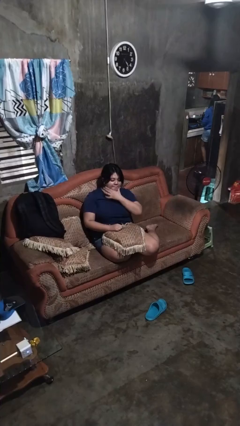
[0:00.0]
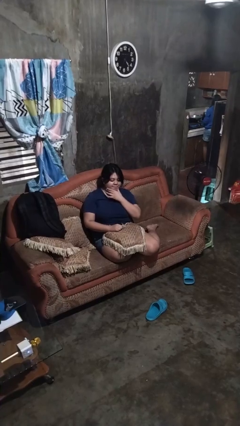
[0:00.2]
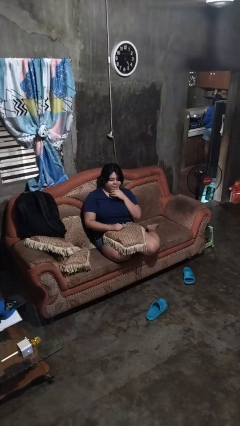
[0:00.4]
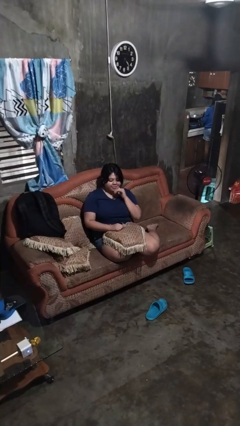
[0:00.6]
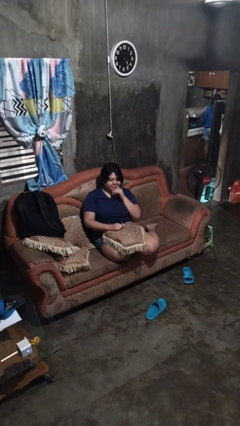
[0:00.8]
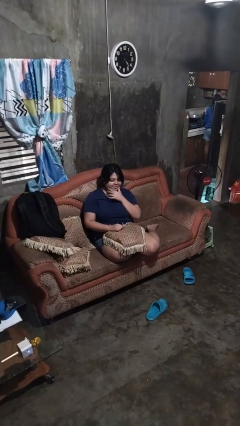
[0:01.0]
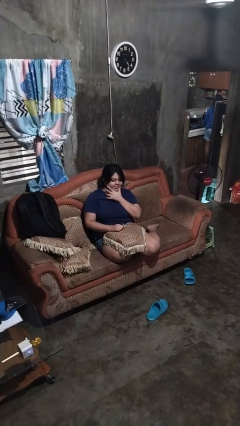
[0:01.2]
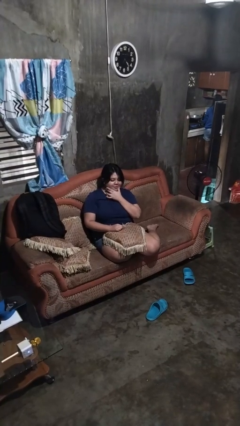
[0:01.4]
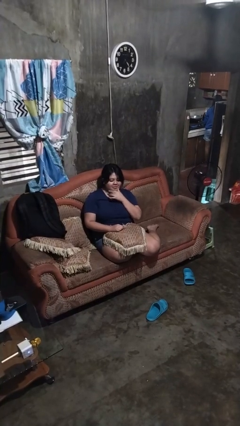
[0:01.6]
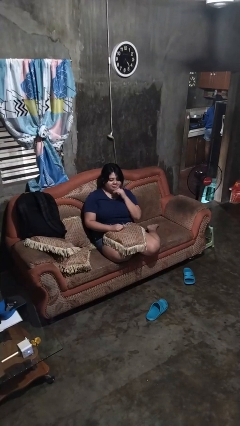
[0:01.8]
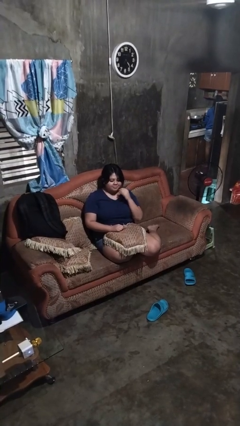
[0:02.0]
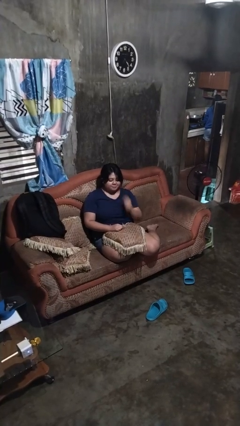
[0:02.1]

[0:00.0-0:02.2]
person strokes chin

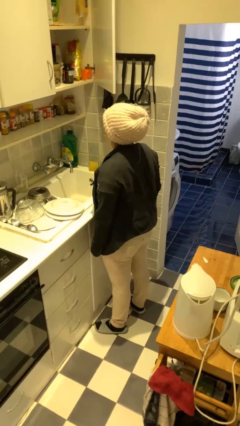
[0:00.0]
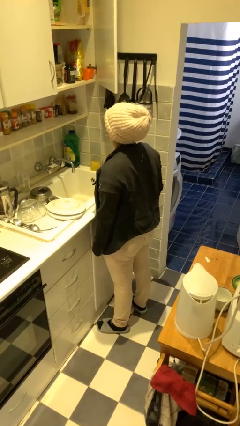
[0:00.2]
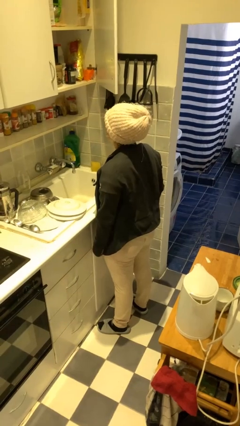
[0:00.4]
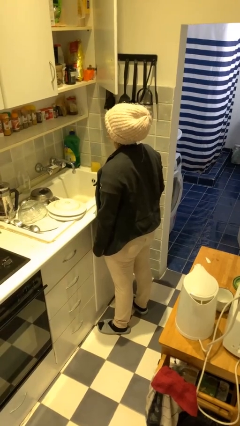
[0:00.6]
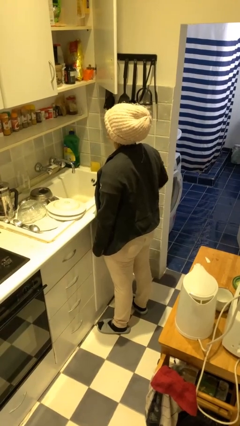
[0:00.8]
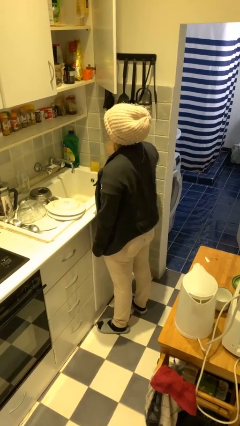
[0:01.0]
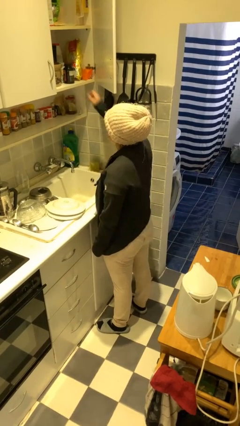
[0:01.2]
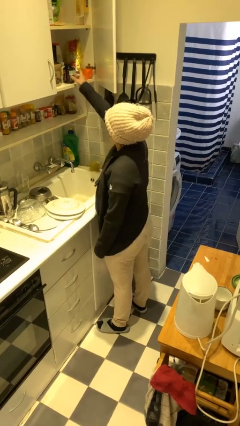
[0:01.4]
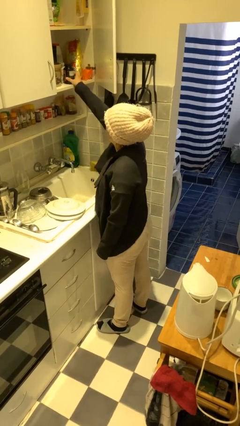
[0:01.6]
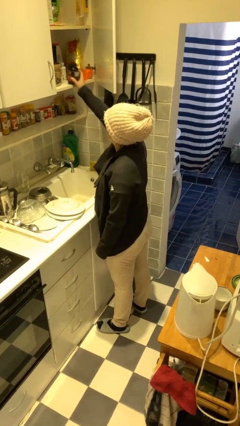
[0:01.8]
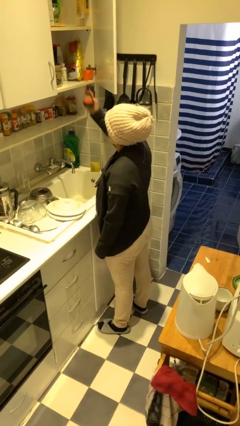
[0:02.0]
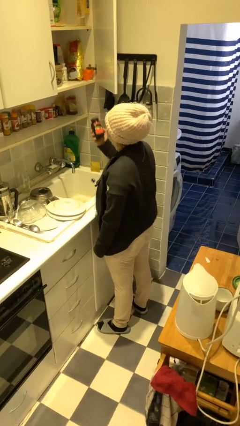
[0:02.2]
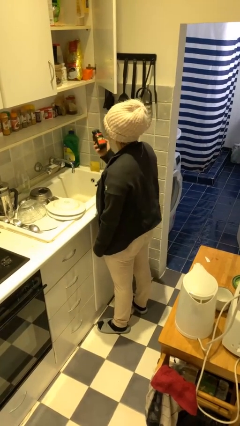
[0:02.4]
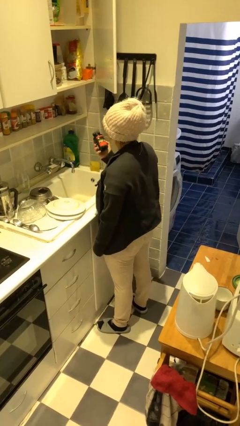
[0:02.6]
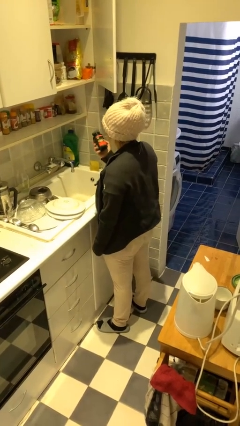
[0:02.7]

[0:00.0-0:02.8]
person picks up object from cabinet

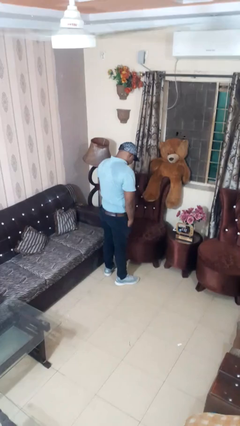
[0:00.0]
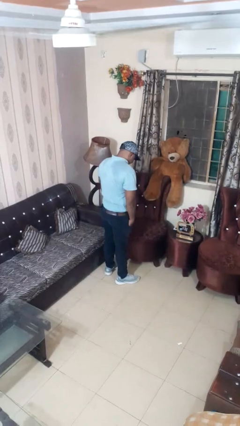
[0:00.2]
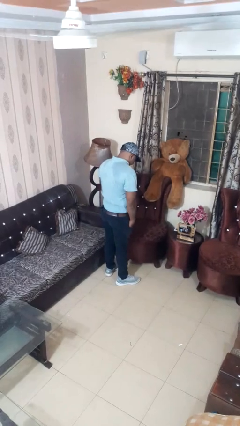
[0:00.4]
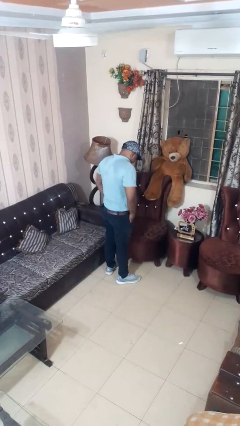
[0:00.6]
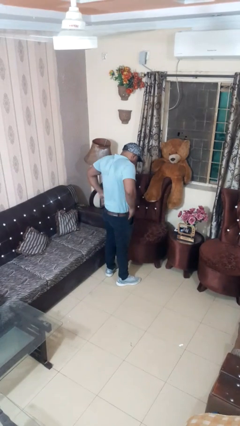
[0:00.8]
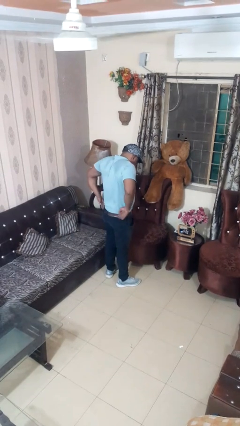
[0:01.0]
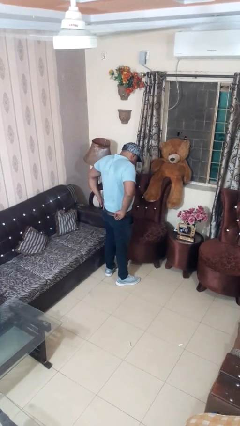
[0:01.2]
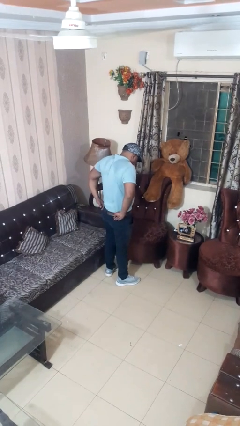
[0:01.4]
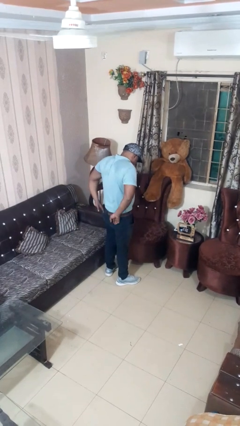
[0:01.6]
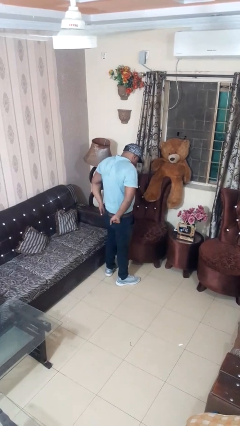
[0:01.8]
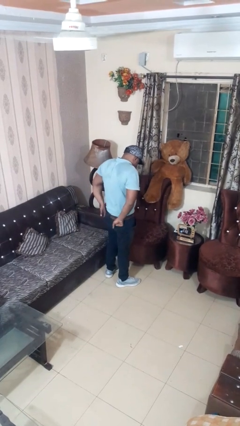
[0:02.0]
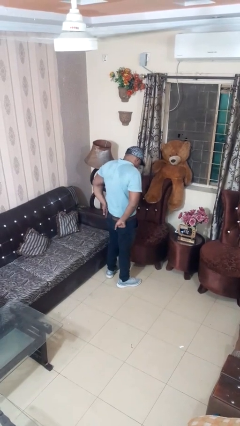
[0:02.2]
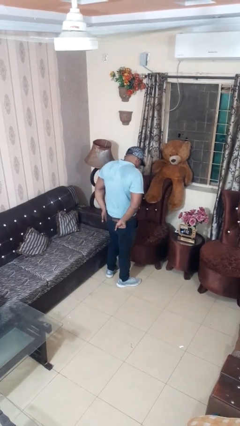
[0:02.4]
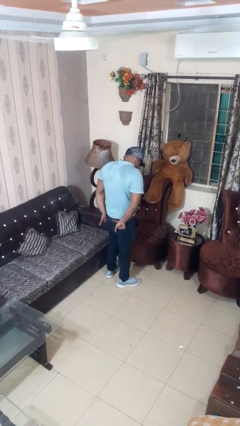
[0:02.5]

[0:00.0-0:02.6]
person puts hands in back pockets

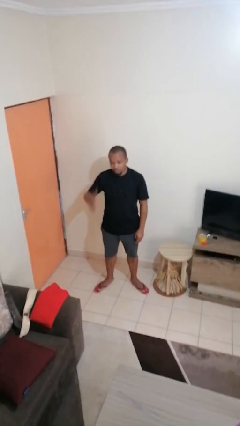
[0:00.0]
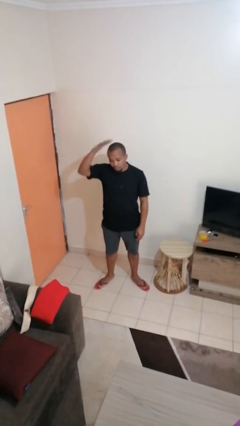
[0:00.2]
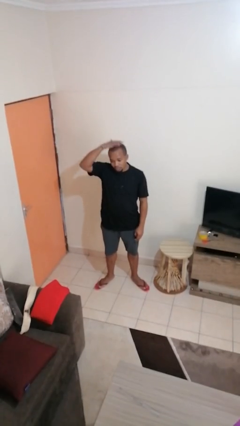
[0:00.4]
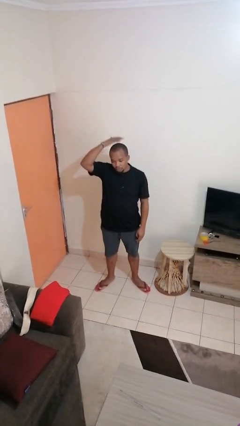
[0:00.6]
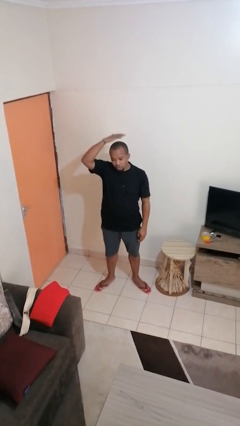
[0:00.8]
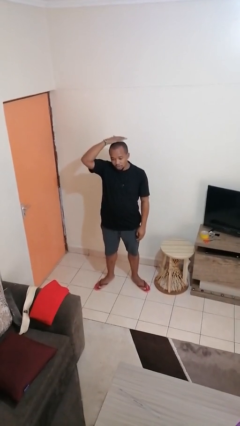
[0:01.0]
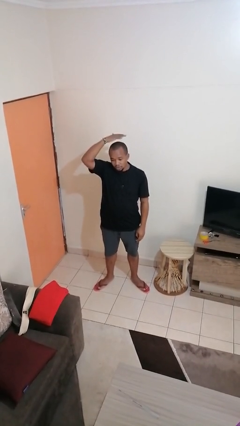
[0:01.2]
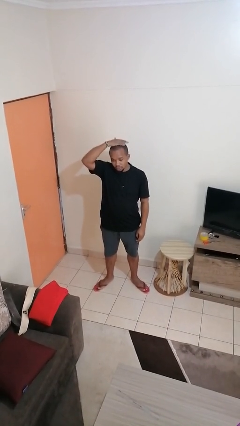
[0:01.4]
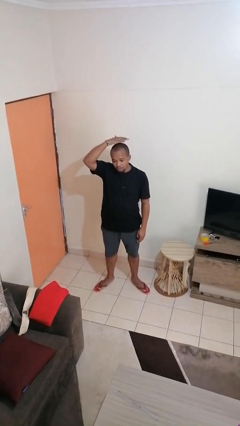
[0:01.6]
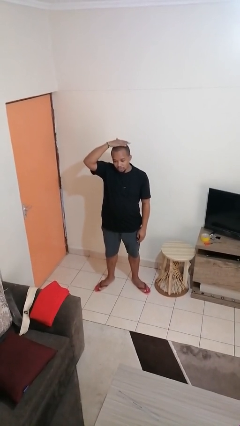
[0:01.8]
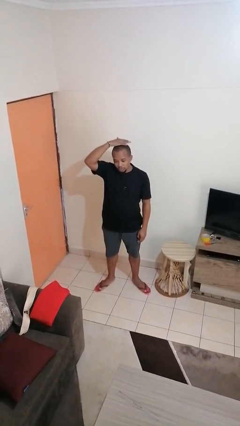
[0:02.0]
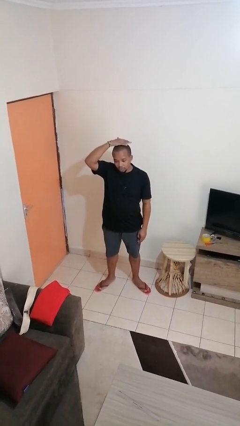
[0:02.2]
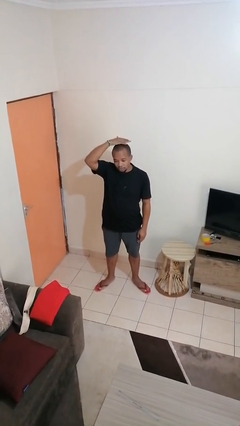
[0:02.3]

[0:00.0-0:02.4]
person pats head

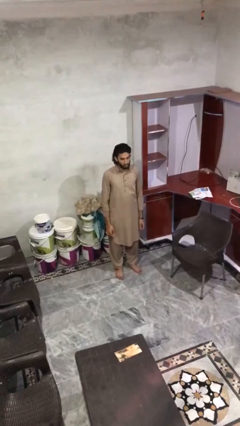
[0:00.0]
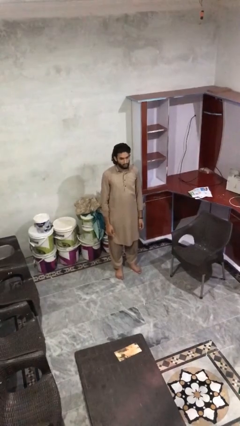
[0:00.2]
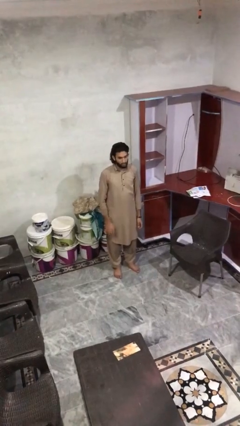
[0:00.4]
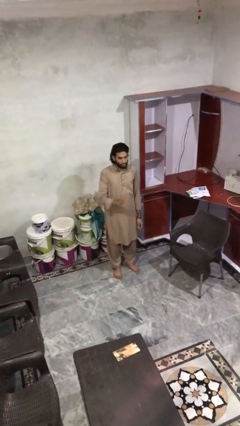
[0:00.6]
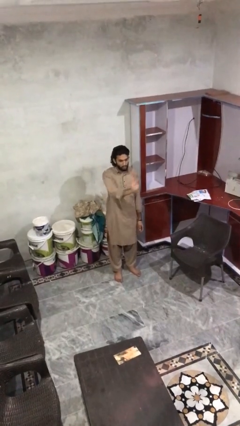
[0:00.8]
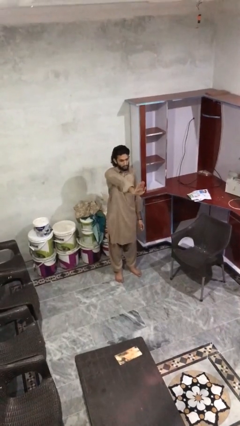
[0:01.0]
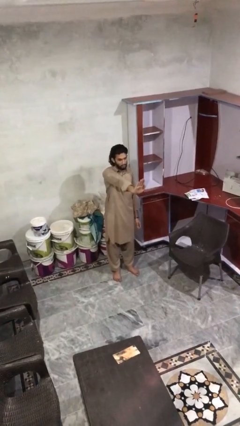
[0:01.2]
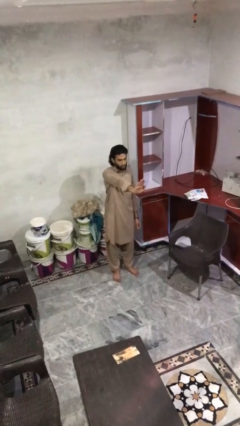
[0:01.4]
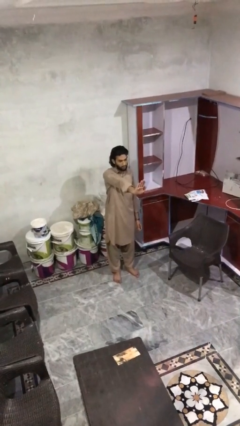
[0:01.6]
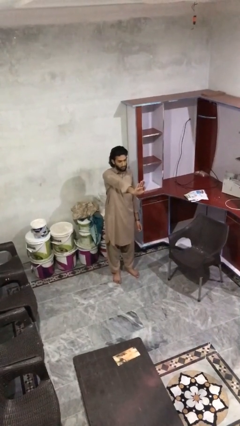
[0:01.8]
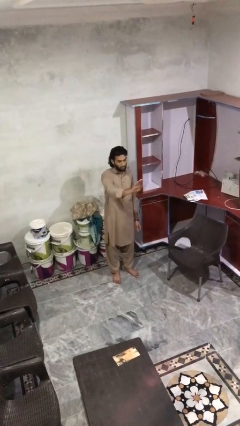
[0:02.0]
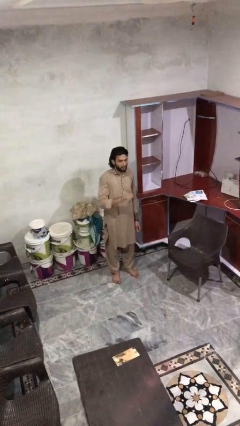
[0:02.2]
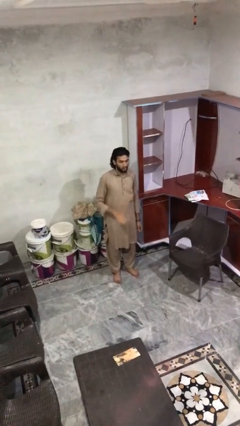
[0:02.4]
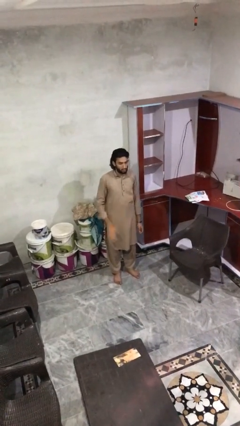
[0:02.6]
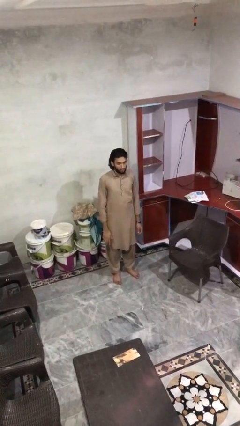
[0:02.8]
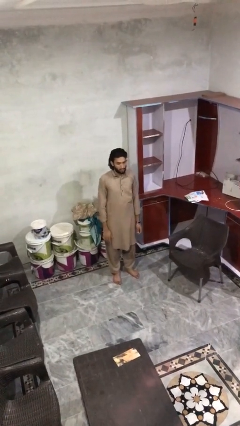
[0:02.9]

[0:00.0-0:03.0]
person gestures stop

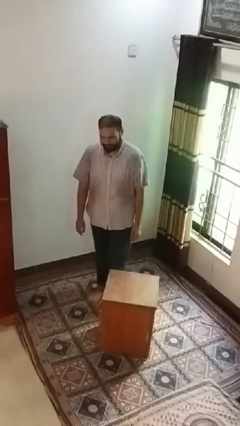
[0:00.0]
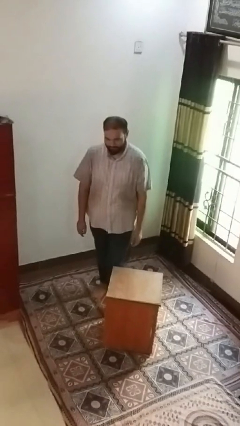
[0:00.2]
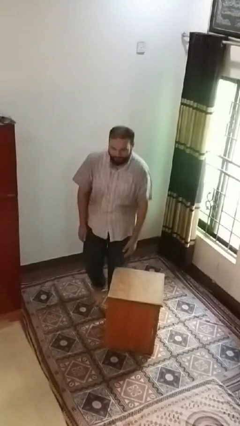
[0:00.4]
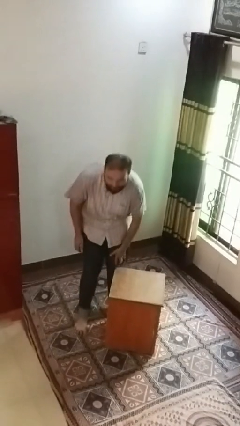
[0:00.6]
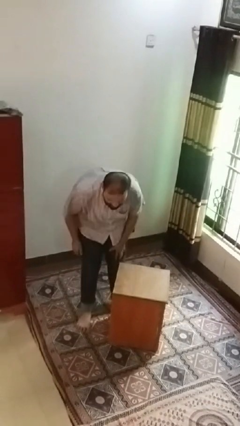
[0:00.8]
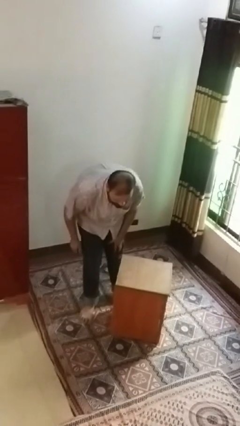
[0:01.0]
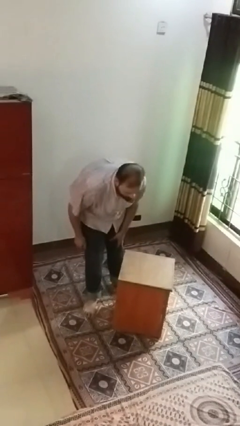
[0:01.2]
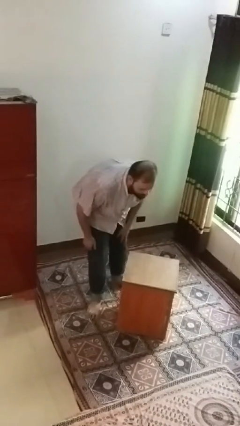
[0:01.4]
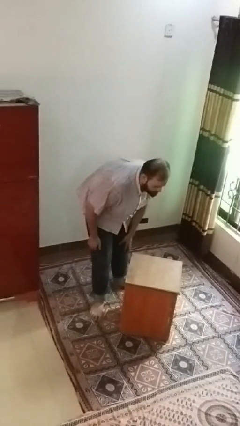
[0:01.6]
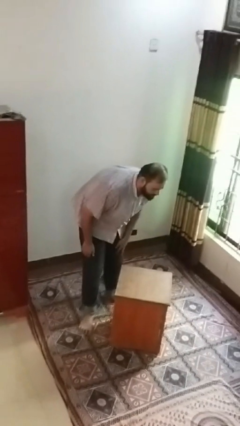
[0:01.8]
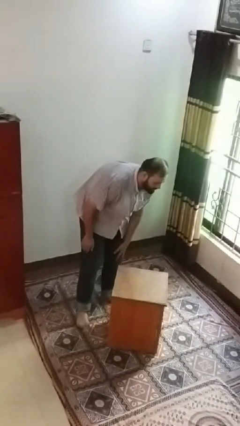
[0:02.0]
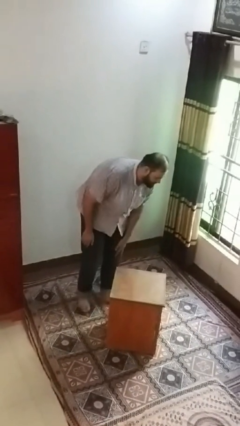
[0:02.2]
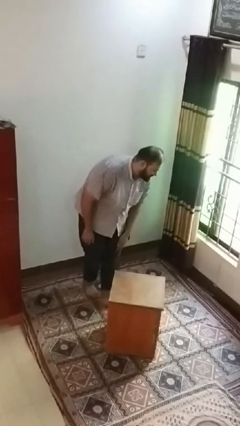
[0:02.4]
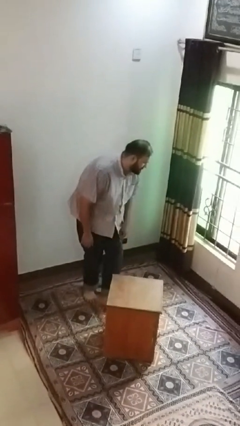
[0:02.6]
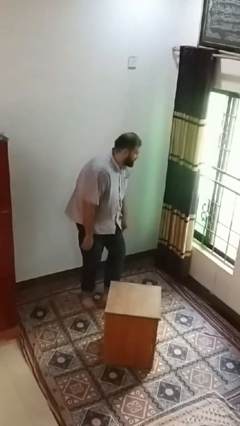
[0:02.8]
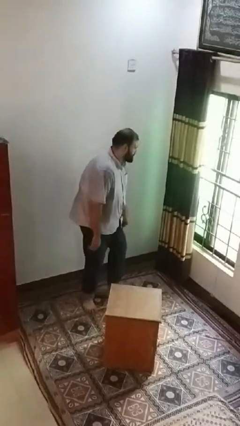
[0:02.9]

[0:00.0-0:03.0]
person bumps into table

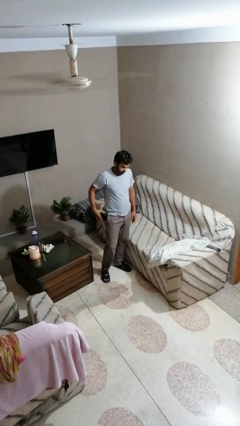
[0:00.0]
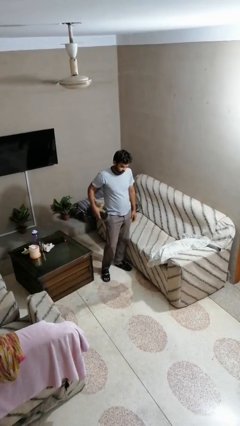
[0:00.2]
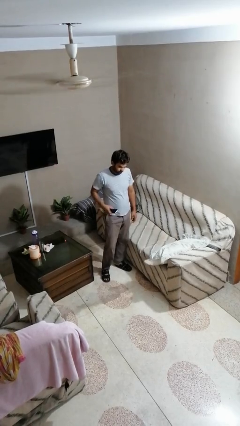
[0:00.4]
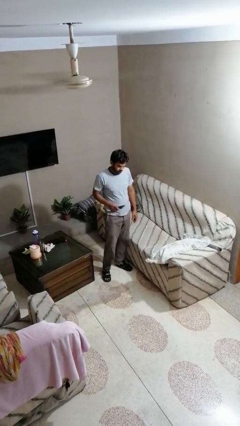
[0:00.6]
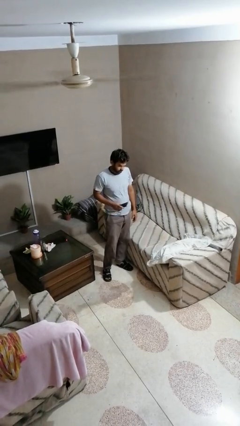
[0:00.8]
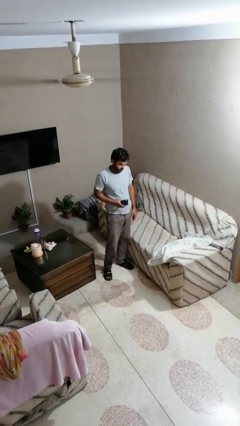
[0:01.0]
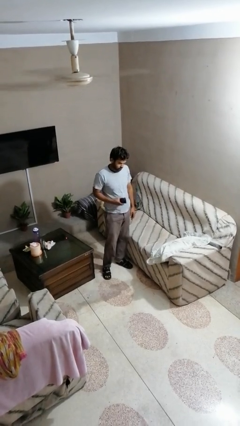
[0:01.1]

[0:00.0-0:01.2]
person takes phone from pocket
